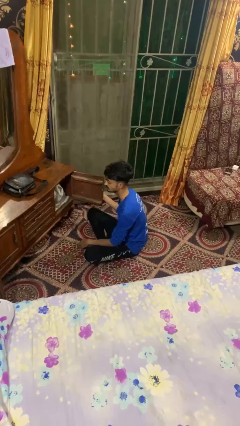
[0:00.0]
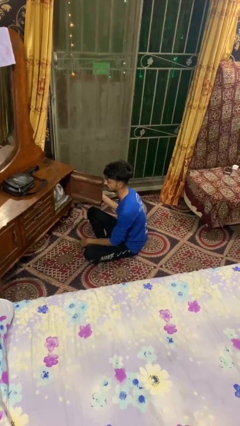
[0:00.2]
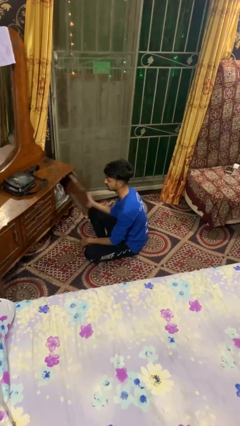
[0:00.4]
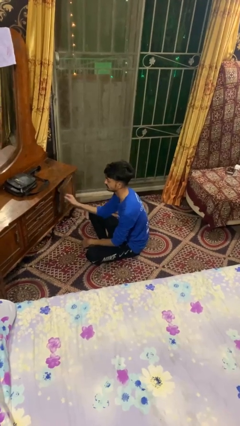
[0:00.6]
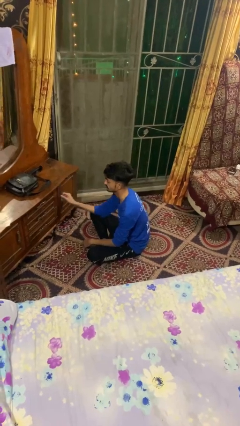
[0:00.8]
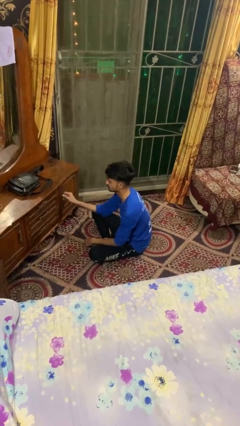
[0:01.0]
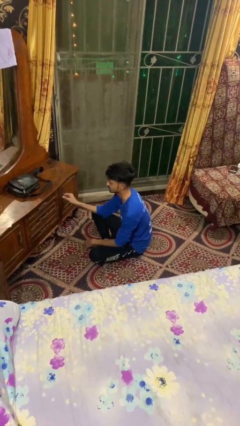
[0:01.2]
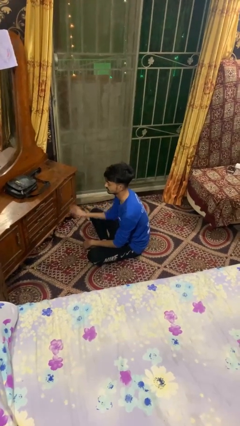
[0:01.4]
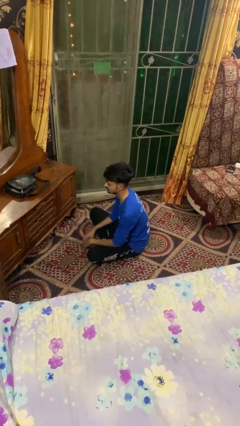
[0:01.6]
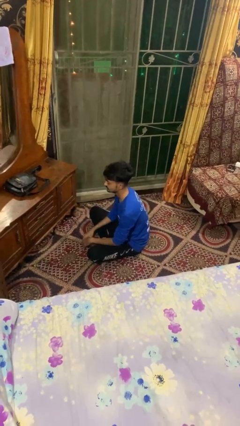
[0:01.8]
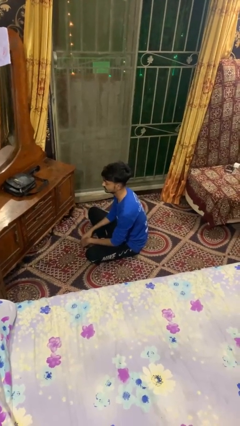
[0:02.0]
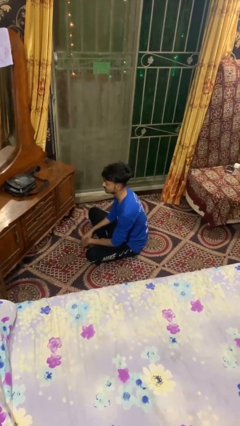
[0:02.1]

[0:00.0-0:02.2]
person closes dresser drawer

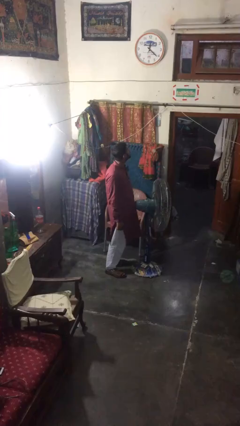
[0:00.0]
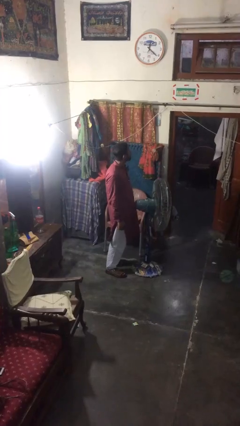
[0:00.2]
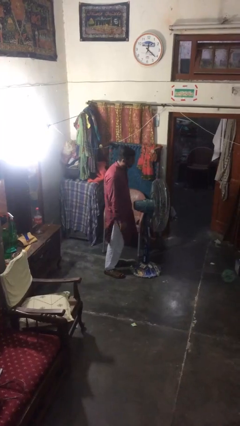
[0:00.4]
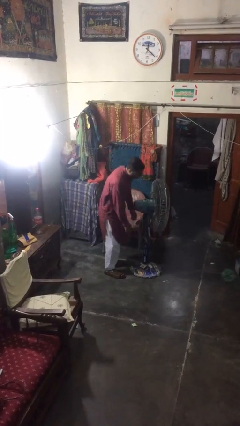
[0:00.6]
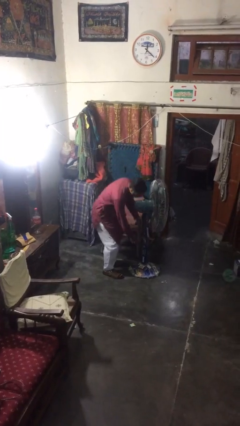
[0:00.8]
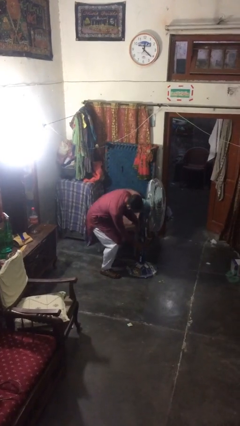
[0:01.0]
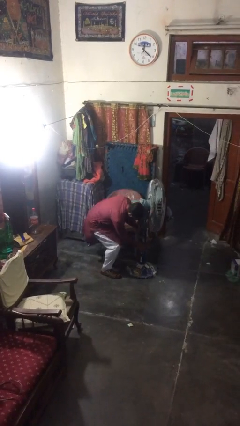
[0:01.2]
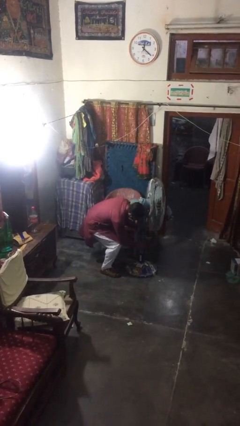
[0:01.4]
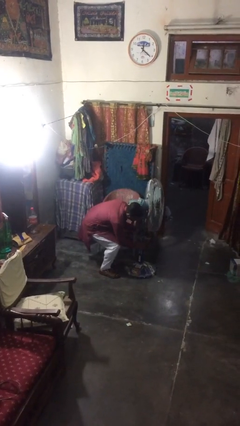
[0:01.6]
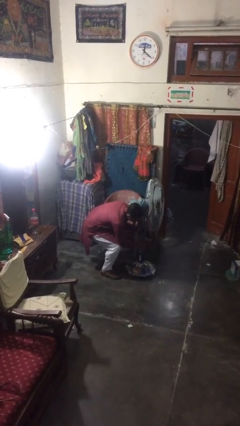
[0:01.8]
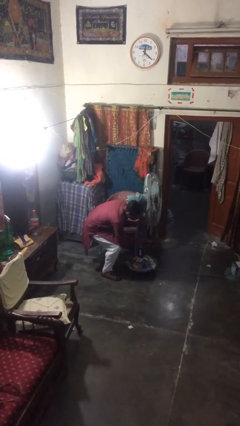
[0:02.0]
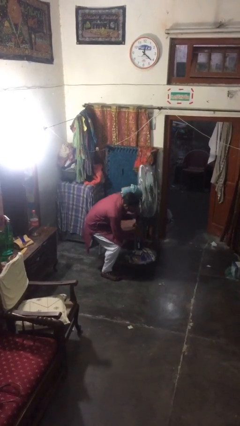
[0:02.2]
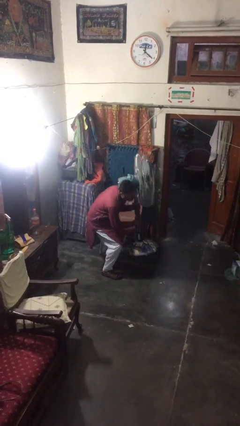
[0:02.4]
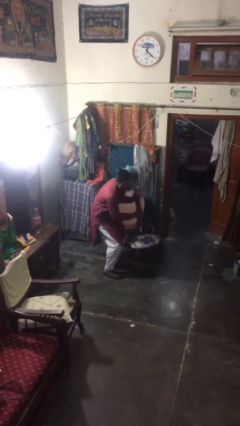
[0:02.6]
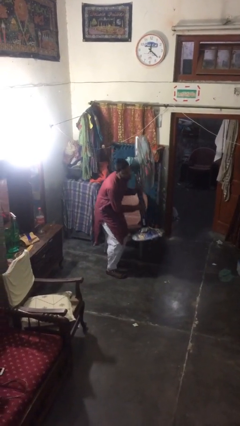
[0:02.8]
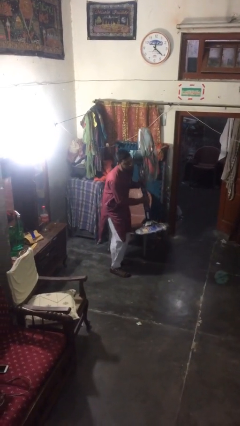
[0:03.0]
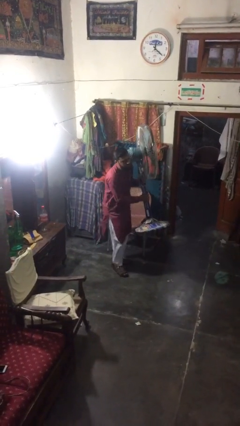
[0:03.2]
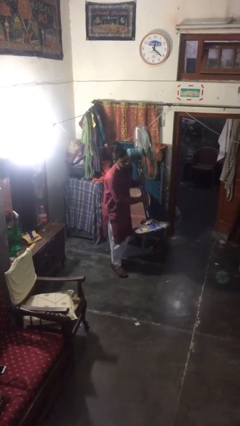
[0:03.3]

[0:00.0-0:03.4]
person picks up object from floor

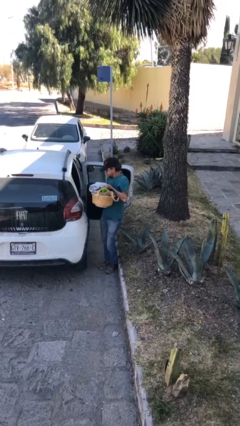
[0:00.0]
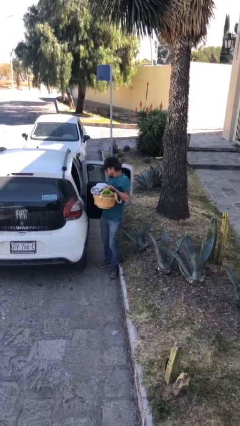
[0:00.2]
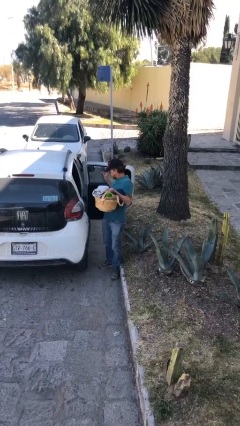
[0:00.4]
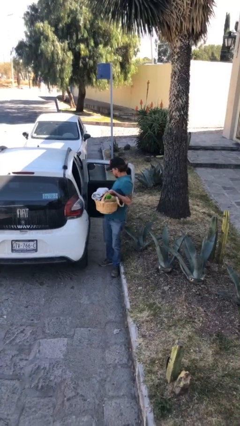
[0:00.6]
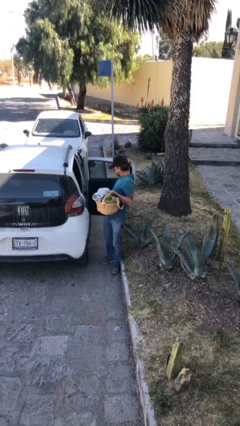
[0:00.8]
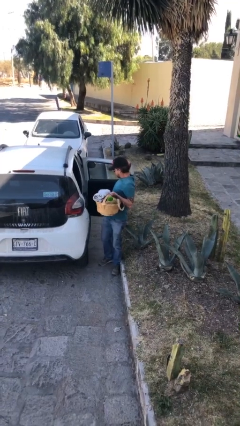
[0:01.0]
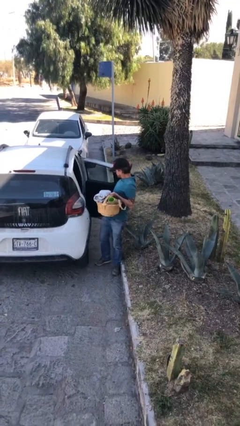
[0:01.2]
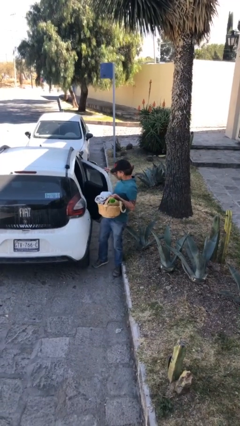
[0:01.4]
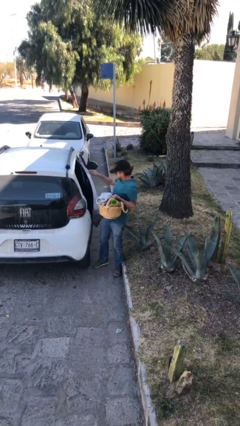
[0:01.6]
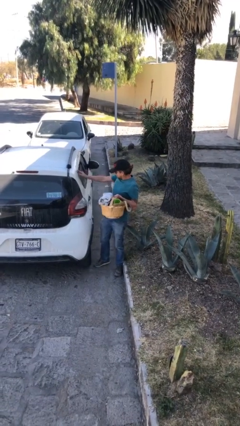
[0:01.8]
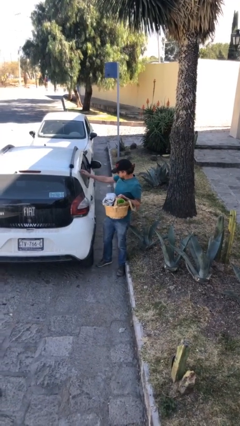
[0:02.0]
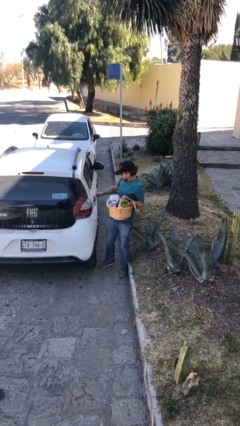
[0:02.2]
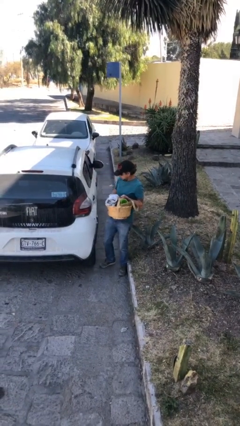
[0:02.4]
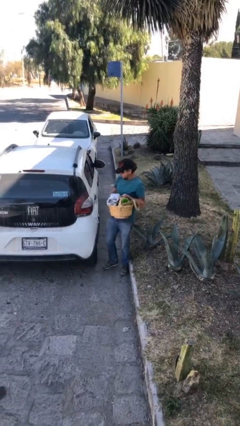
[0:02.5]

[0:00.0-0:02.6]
person closes car door

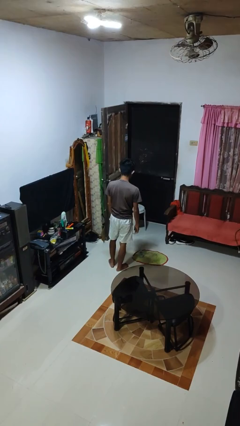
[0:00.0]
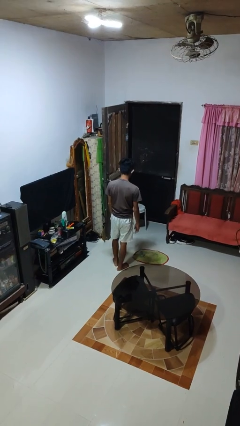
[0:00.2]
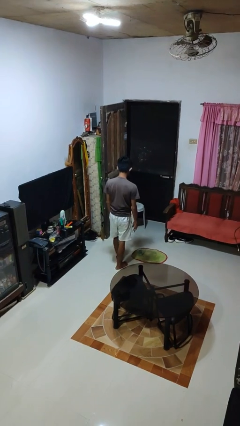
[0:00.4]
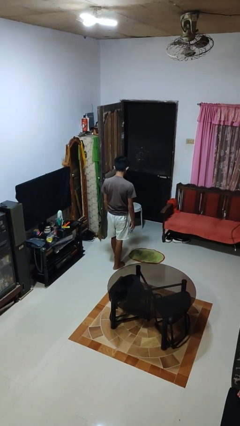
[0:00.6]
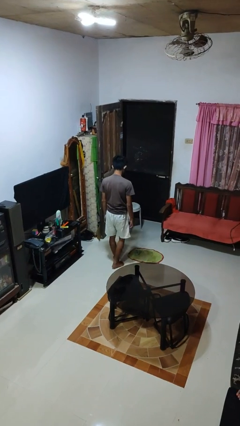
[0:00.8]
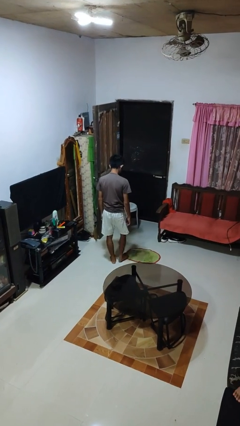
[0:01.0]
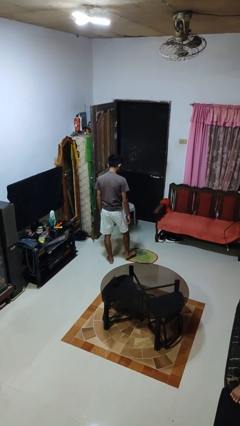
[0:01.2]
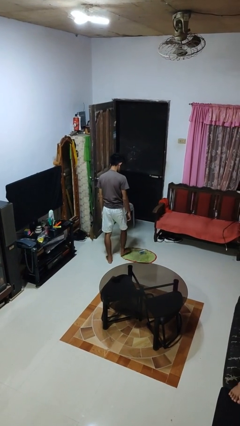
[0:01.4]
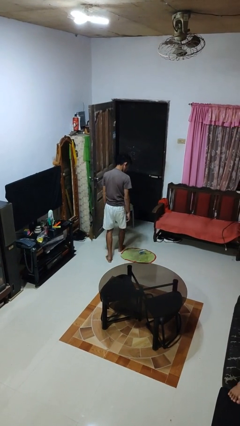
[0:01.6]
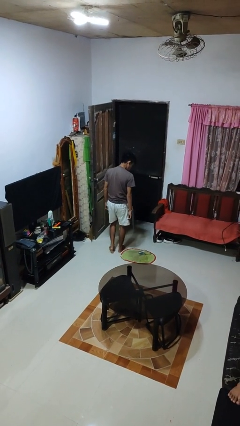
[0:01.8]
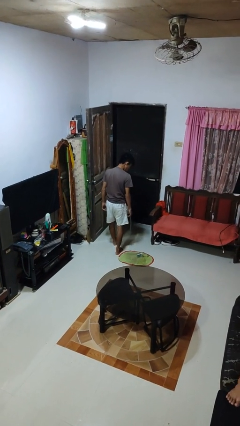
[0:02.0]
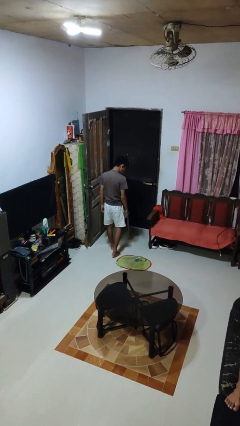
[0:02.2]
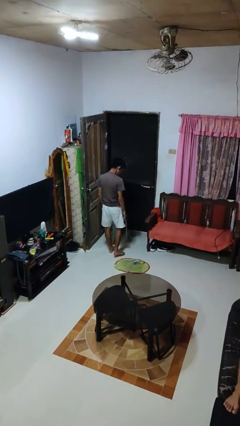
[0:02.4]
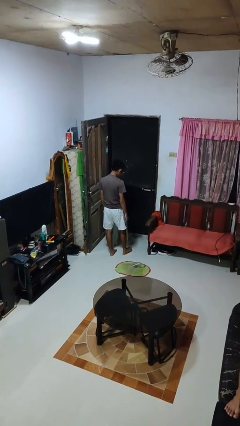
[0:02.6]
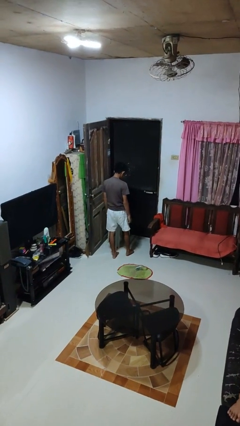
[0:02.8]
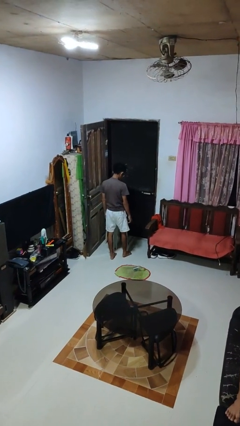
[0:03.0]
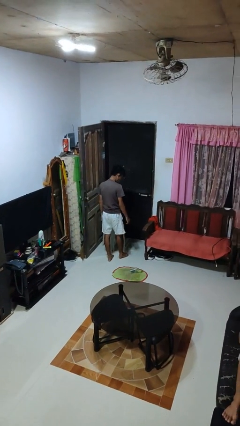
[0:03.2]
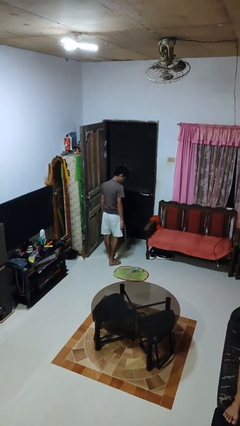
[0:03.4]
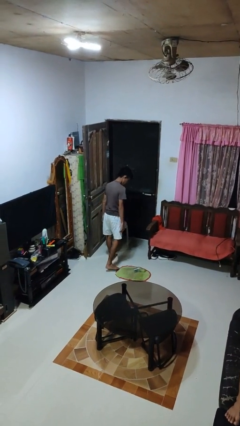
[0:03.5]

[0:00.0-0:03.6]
person spills on floor

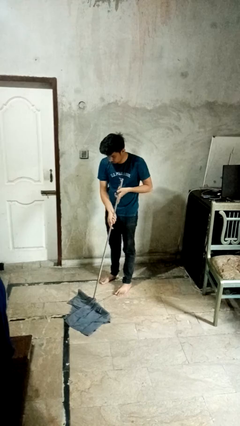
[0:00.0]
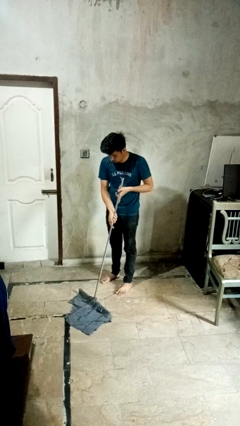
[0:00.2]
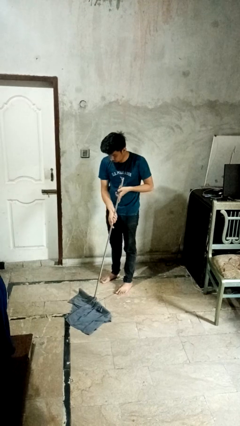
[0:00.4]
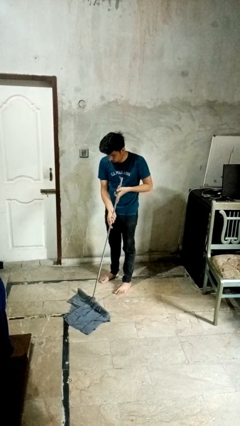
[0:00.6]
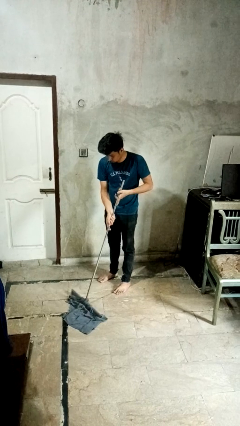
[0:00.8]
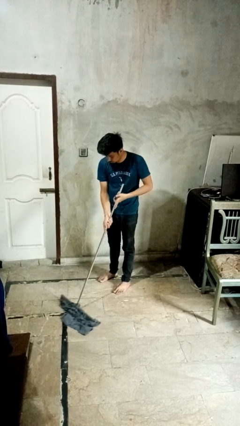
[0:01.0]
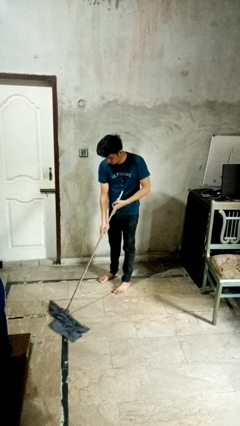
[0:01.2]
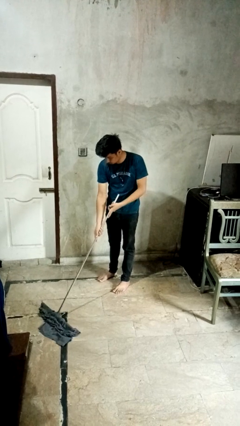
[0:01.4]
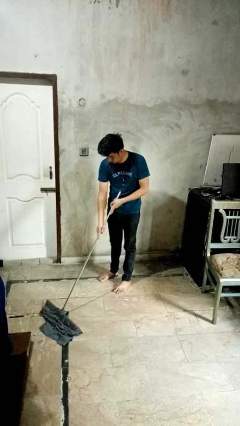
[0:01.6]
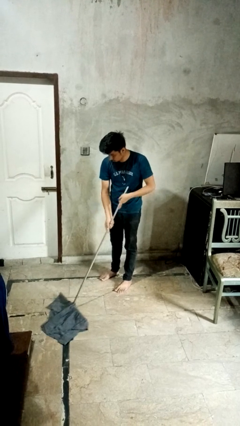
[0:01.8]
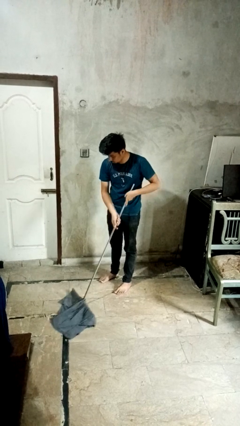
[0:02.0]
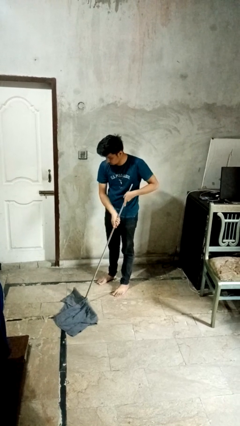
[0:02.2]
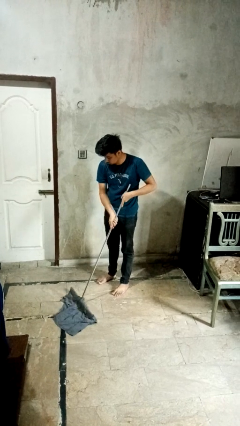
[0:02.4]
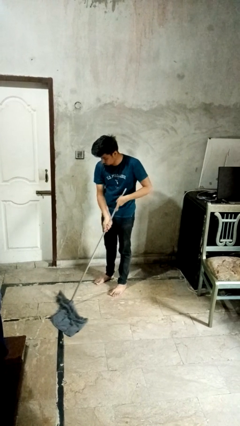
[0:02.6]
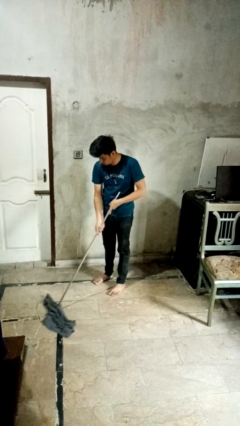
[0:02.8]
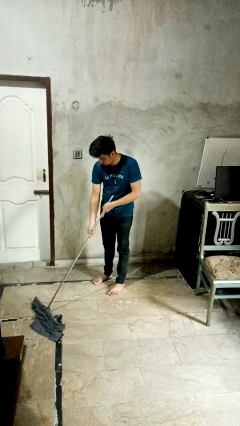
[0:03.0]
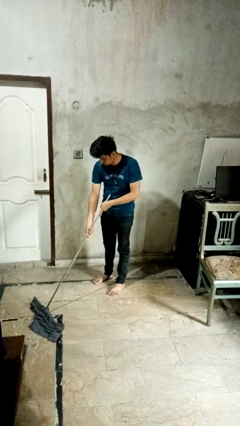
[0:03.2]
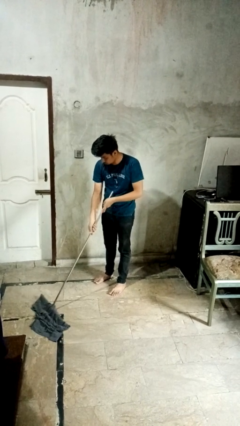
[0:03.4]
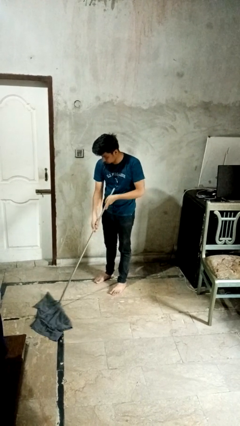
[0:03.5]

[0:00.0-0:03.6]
person mops

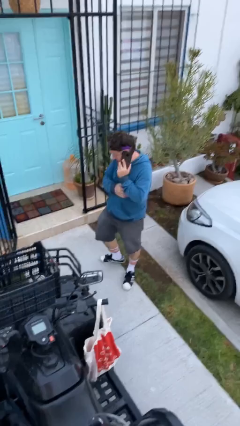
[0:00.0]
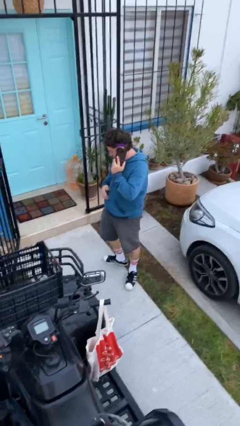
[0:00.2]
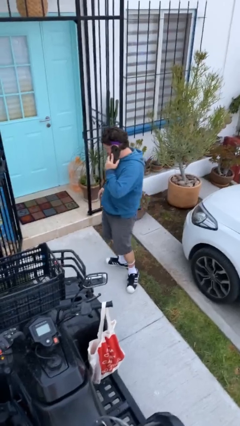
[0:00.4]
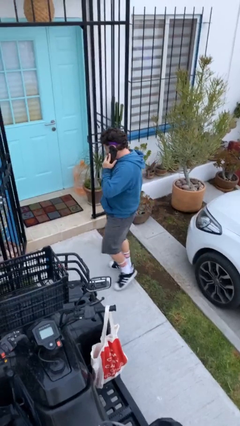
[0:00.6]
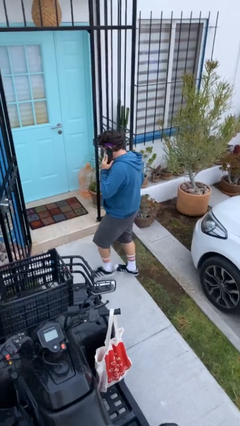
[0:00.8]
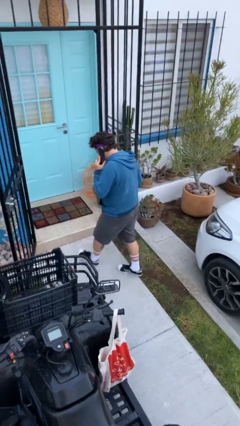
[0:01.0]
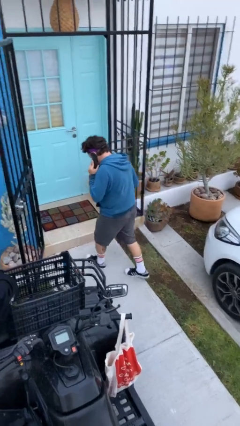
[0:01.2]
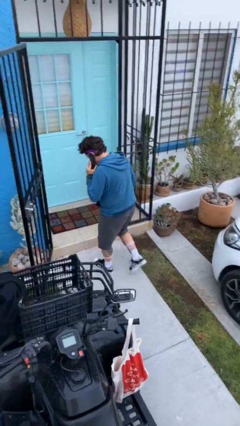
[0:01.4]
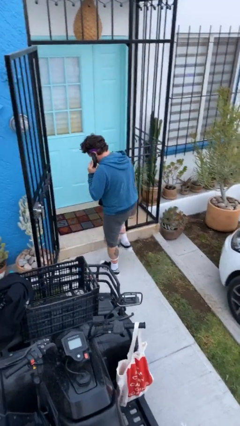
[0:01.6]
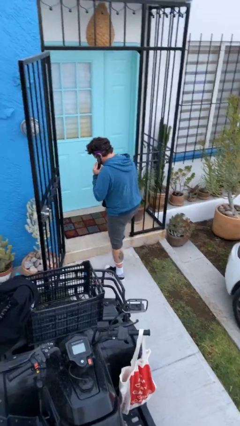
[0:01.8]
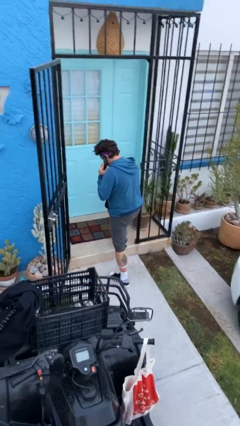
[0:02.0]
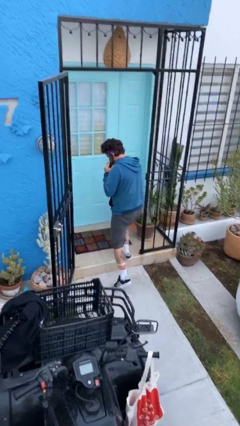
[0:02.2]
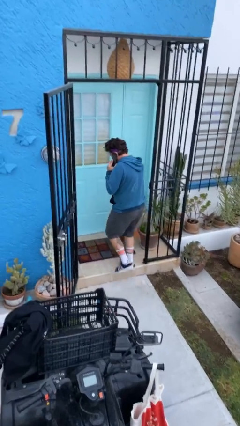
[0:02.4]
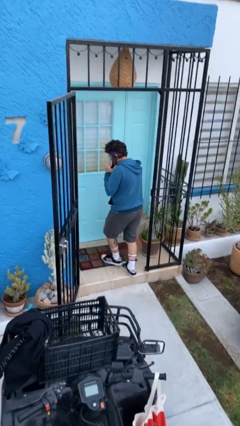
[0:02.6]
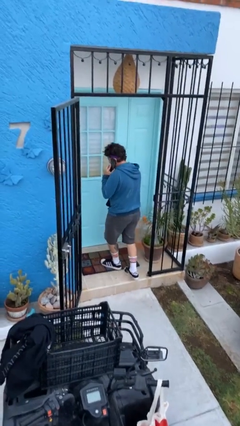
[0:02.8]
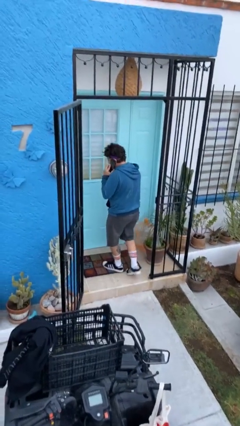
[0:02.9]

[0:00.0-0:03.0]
person exits scene through structure
